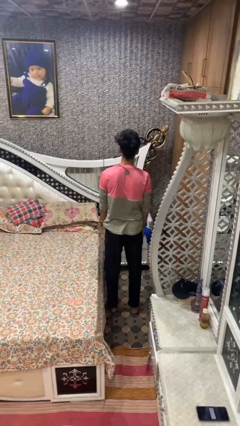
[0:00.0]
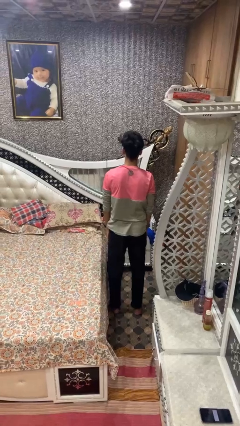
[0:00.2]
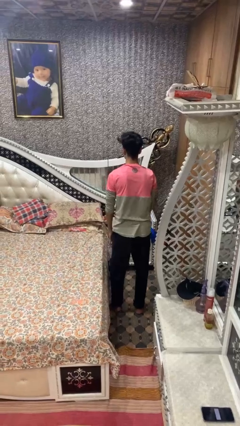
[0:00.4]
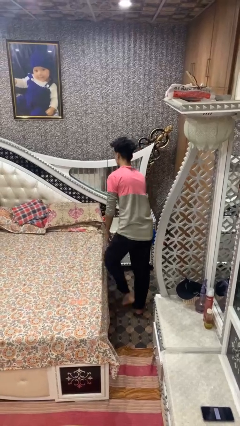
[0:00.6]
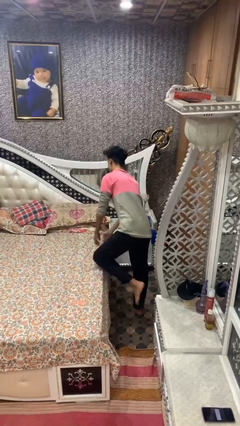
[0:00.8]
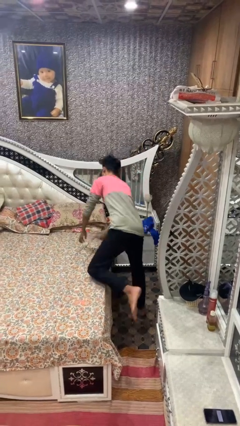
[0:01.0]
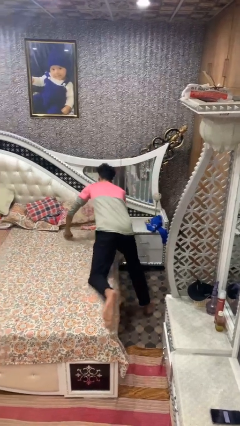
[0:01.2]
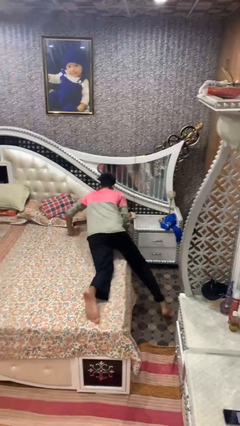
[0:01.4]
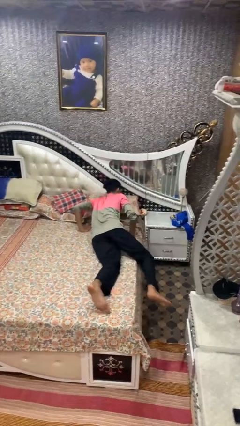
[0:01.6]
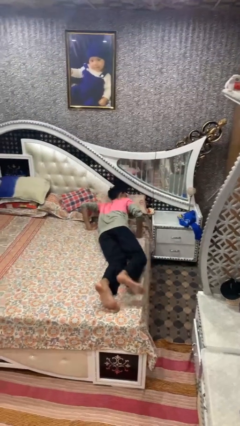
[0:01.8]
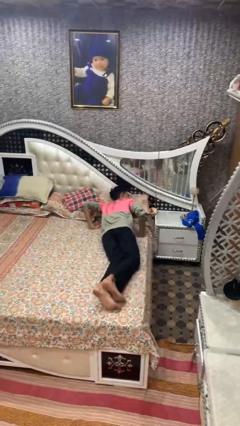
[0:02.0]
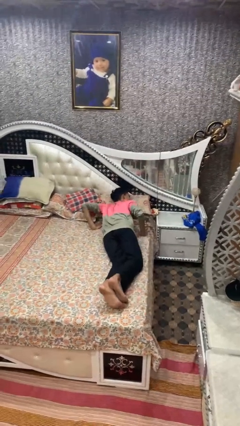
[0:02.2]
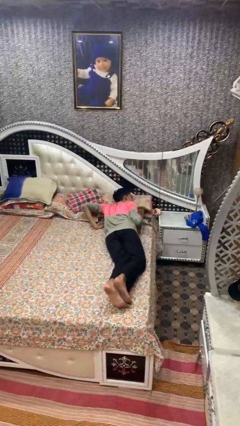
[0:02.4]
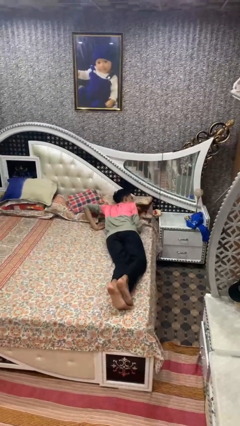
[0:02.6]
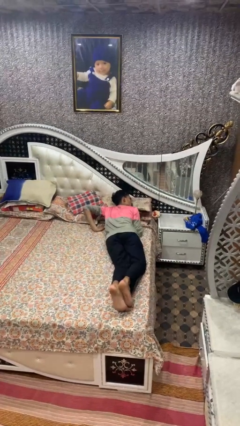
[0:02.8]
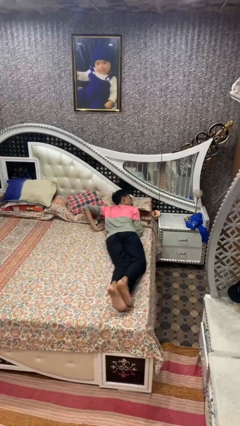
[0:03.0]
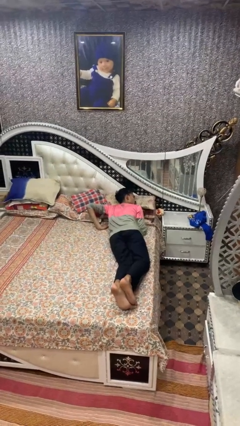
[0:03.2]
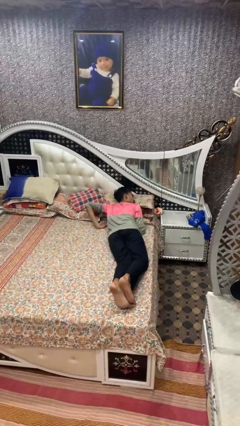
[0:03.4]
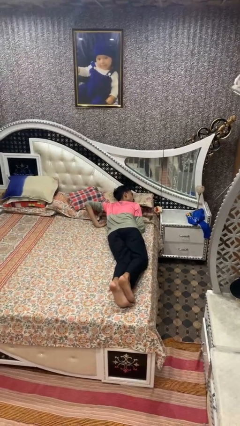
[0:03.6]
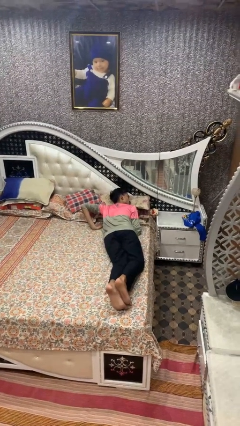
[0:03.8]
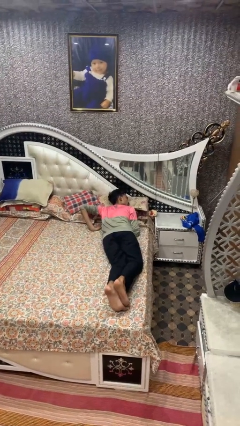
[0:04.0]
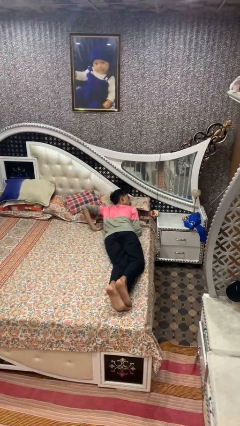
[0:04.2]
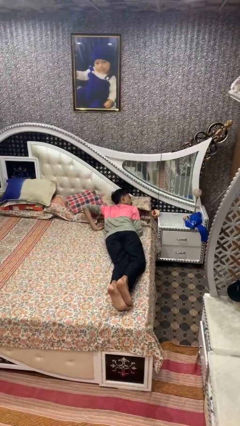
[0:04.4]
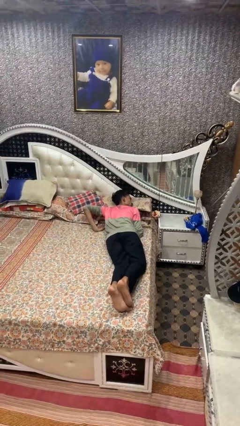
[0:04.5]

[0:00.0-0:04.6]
person lies down on bed

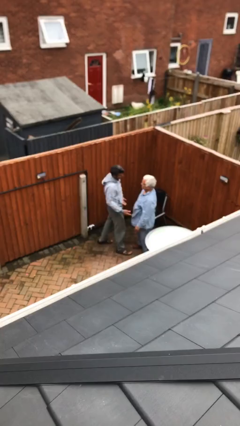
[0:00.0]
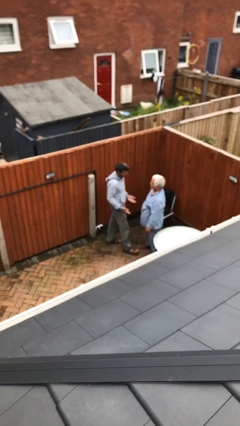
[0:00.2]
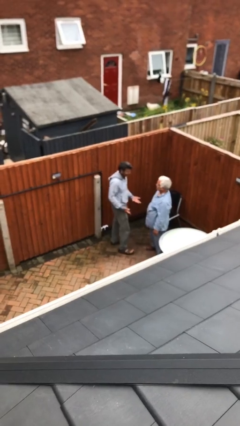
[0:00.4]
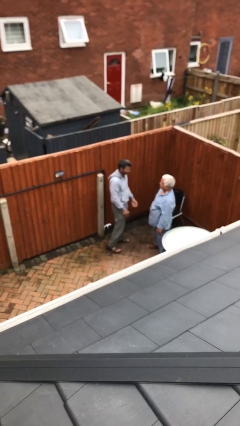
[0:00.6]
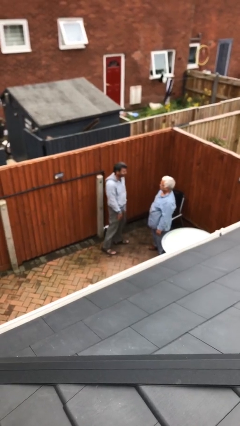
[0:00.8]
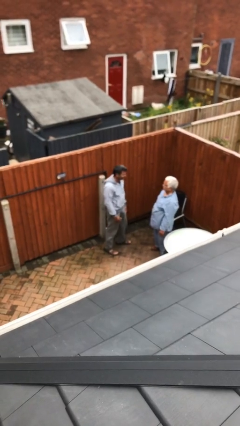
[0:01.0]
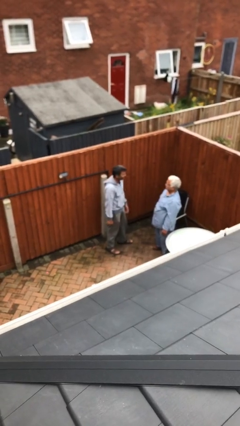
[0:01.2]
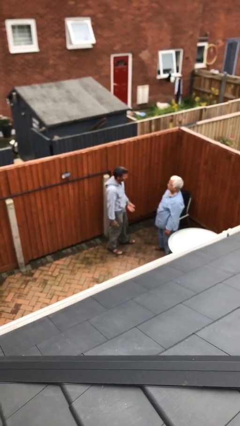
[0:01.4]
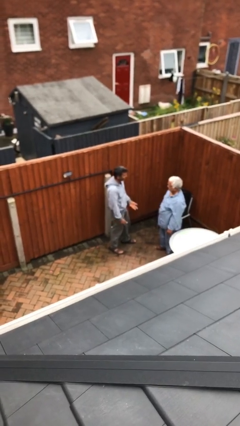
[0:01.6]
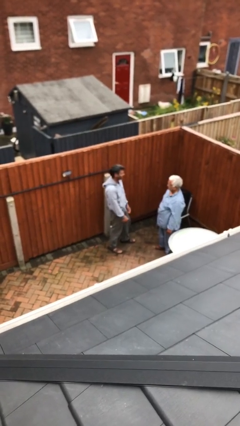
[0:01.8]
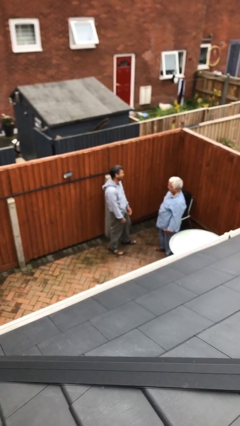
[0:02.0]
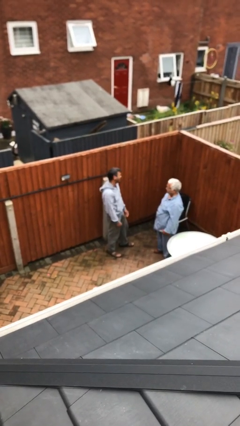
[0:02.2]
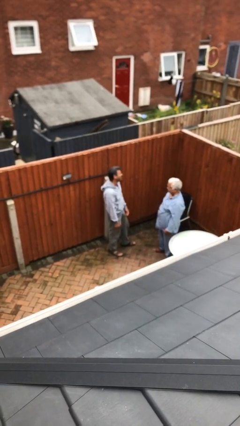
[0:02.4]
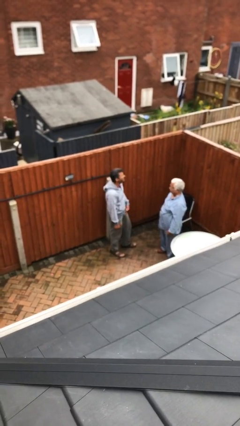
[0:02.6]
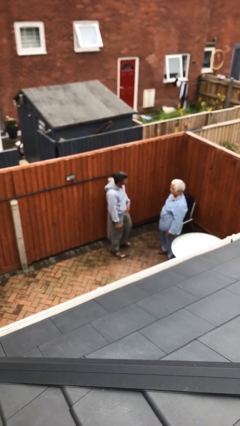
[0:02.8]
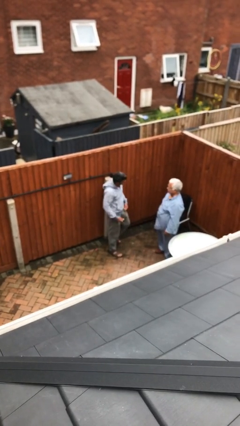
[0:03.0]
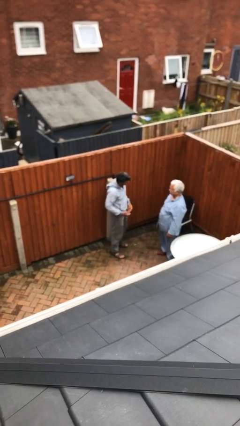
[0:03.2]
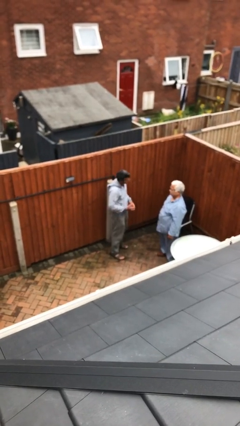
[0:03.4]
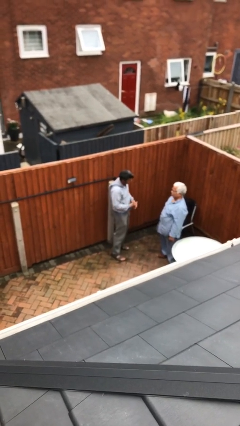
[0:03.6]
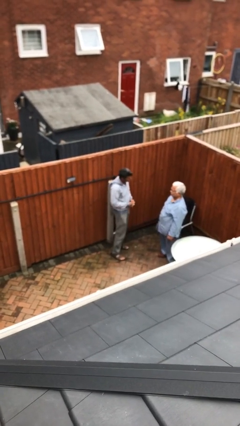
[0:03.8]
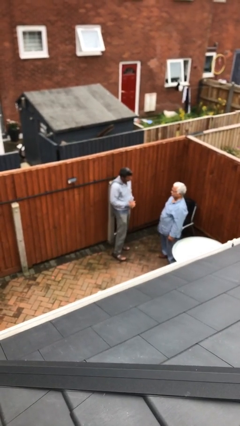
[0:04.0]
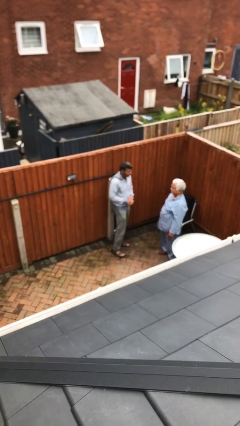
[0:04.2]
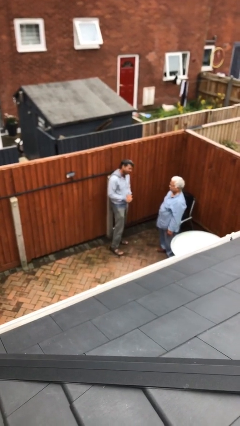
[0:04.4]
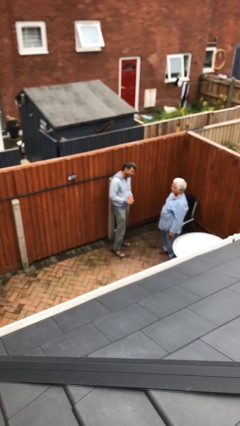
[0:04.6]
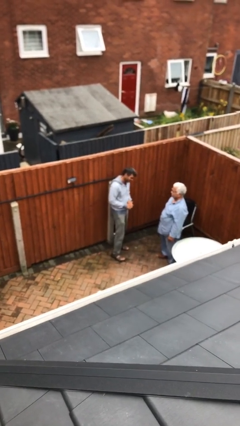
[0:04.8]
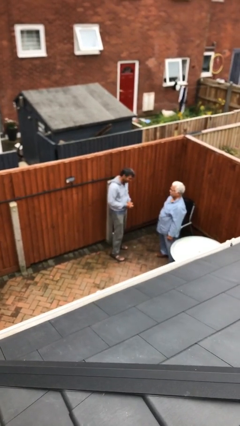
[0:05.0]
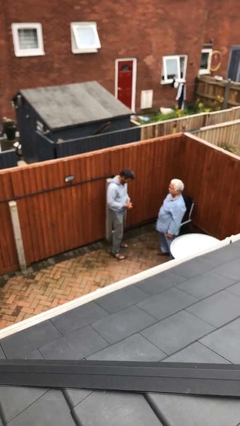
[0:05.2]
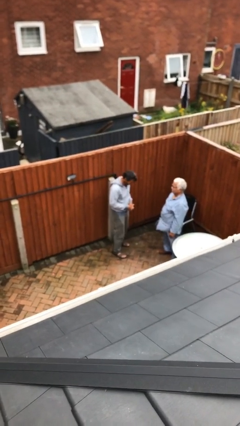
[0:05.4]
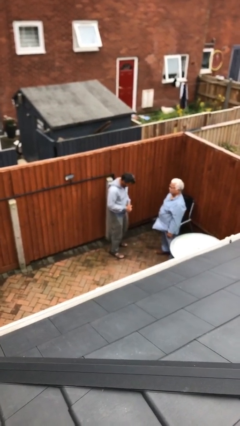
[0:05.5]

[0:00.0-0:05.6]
person talks to person

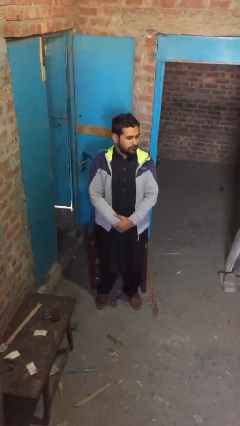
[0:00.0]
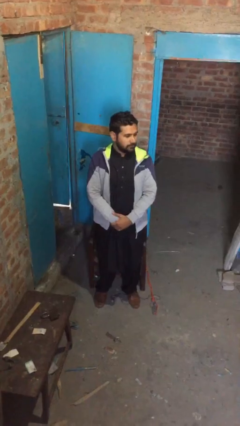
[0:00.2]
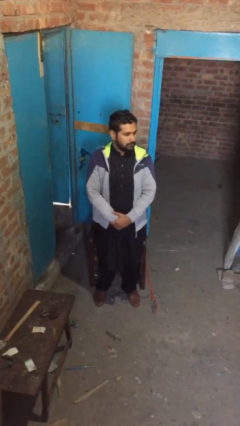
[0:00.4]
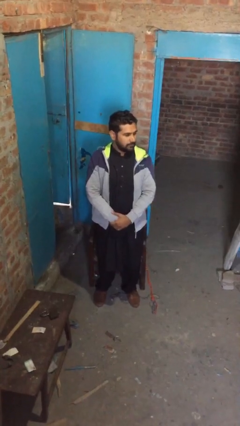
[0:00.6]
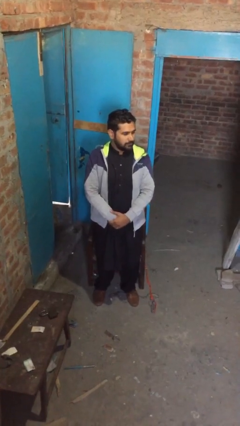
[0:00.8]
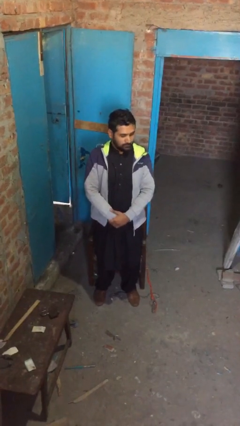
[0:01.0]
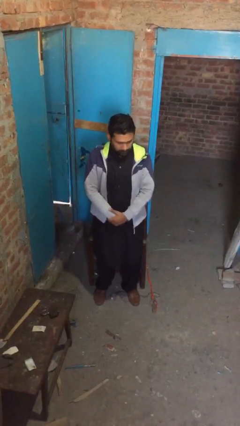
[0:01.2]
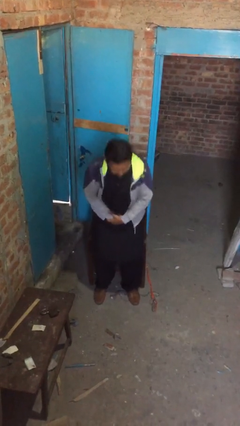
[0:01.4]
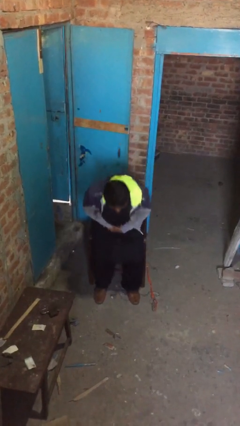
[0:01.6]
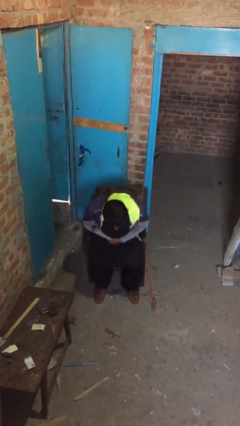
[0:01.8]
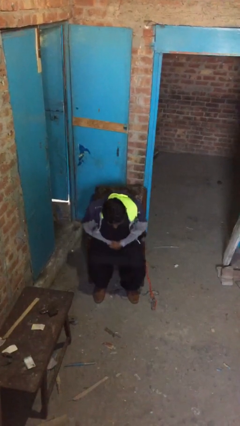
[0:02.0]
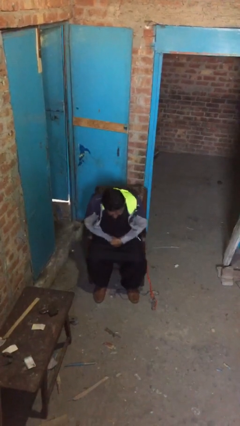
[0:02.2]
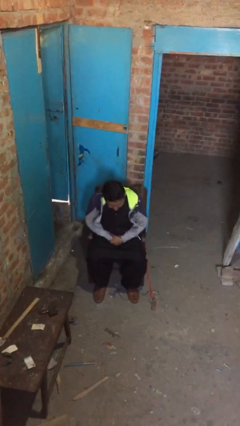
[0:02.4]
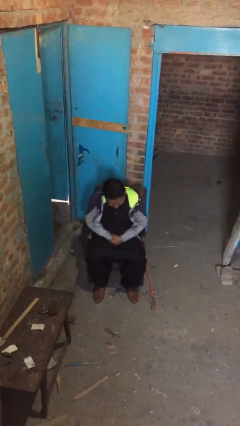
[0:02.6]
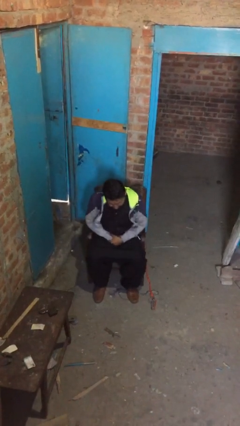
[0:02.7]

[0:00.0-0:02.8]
person sits down

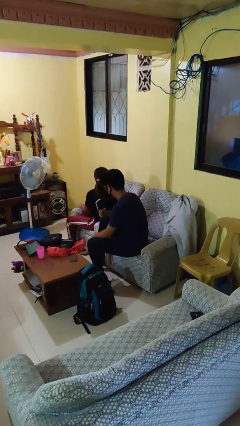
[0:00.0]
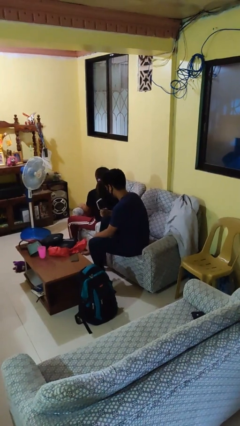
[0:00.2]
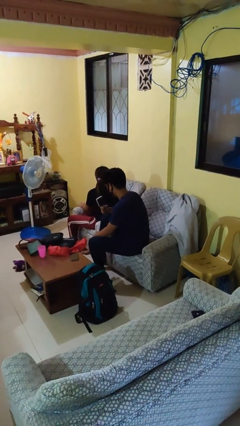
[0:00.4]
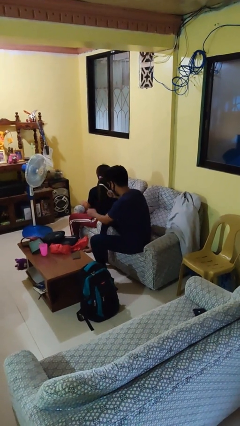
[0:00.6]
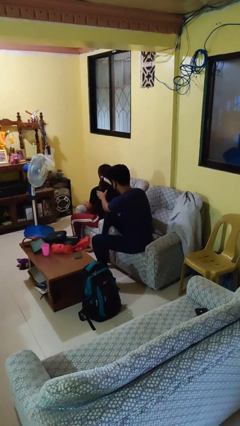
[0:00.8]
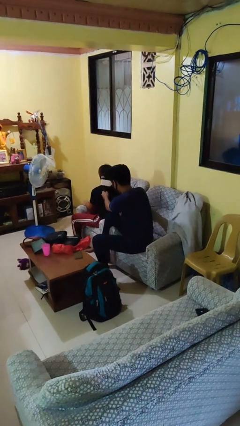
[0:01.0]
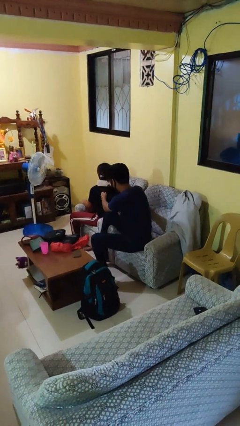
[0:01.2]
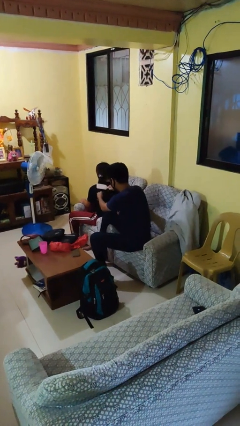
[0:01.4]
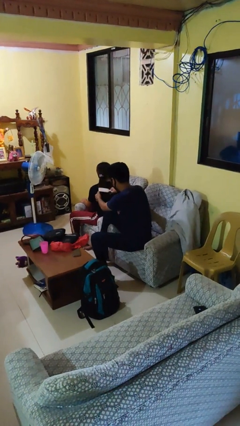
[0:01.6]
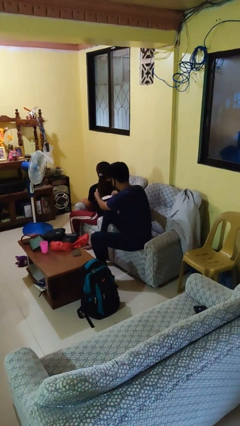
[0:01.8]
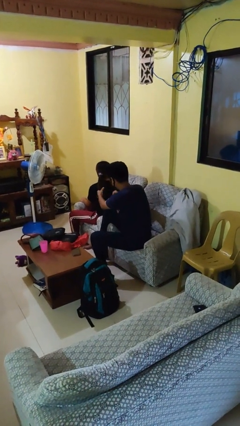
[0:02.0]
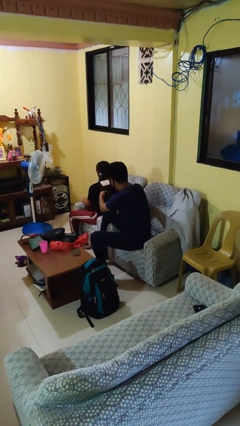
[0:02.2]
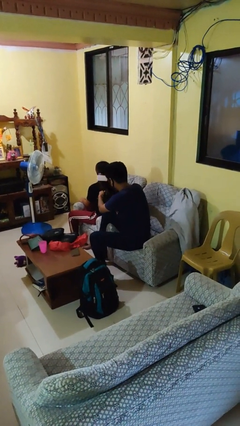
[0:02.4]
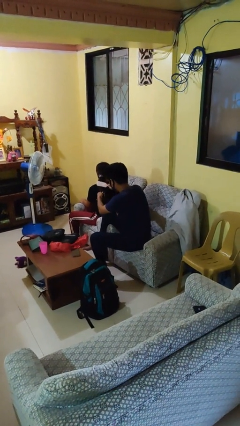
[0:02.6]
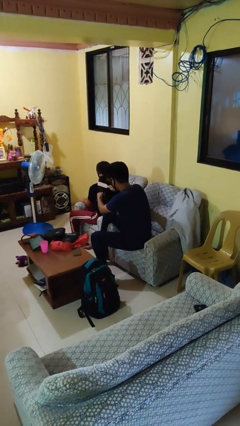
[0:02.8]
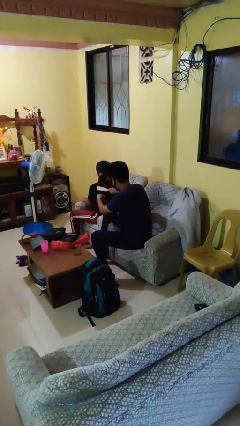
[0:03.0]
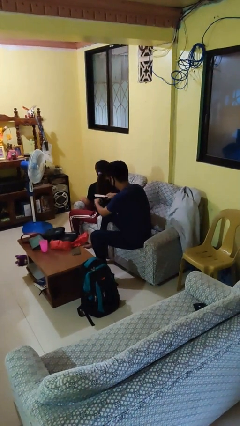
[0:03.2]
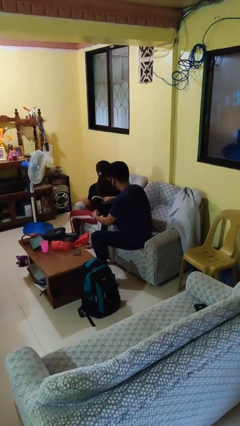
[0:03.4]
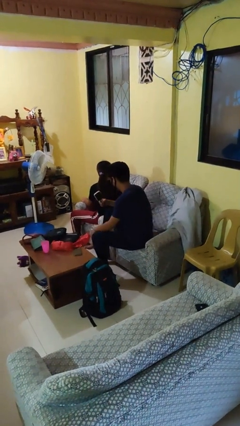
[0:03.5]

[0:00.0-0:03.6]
person brushes hair of person

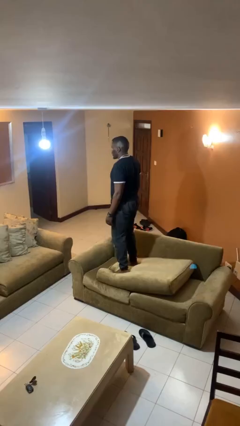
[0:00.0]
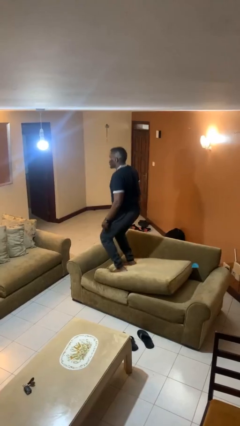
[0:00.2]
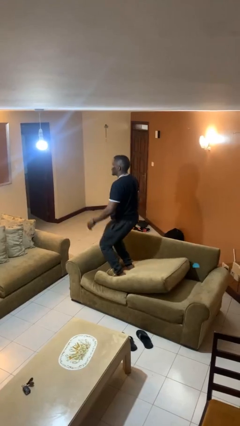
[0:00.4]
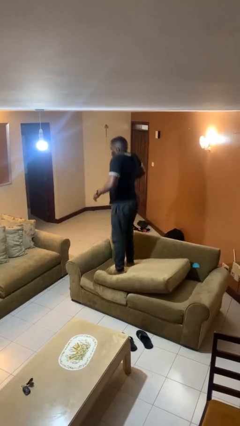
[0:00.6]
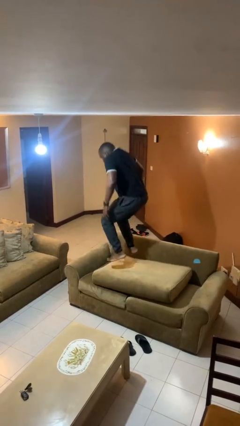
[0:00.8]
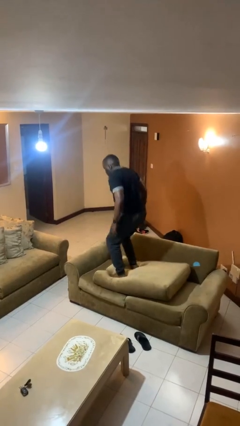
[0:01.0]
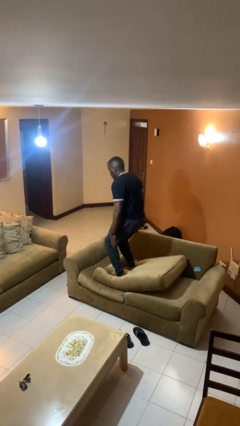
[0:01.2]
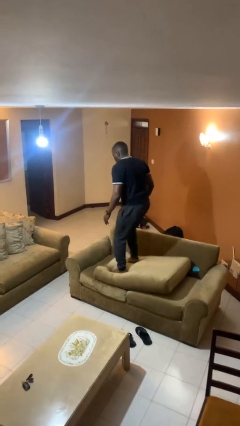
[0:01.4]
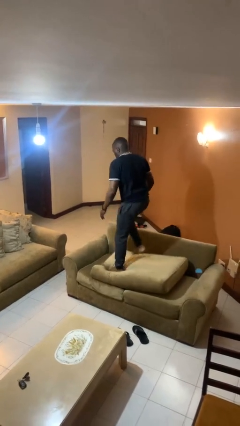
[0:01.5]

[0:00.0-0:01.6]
person jumps on couch
